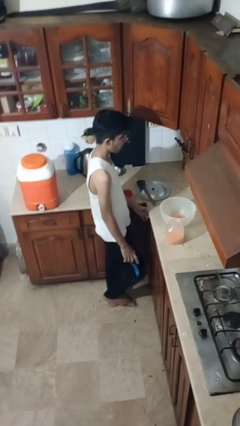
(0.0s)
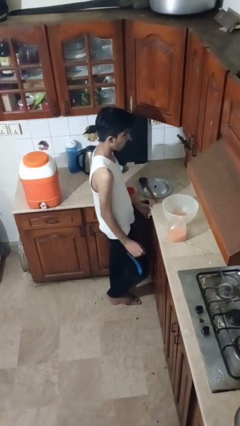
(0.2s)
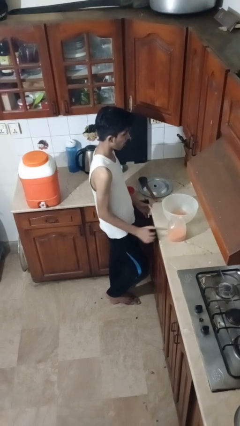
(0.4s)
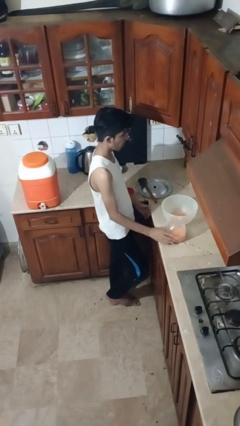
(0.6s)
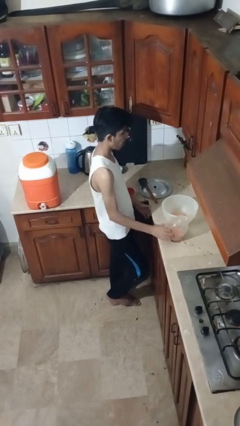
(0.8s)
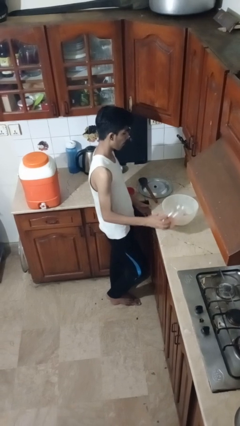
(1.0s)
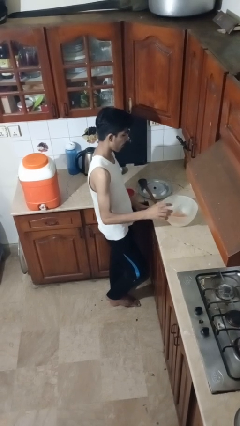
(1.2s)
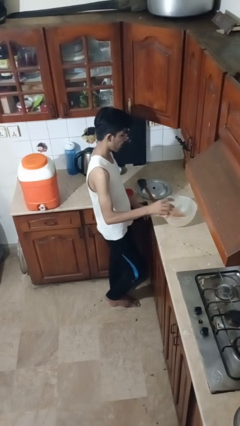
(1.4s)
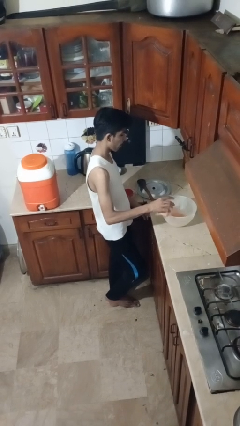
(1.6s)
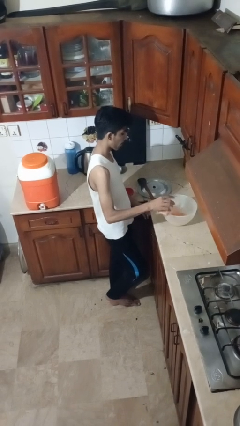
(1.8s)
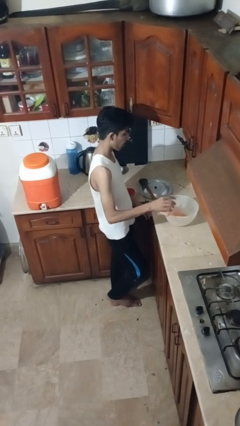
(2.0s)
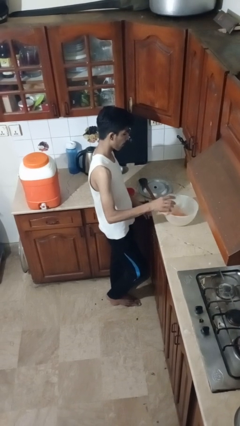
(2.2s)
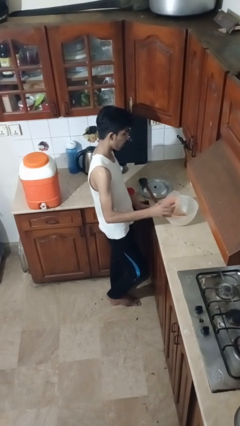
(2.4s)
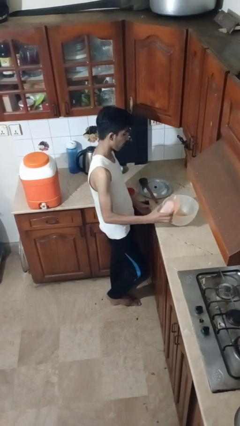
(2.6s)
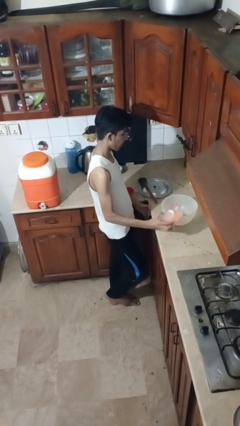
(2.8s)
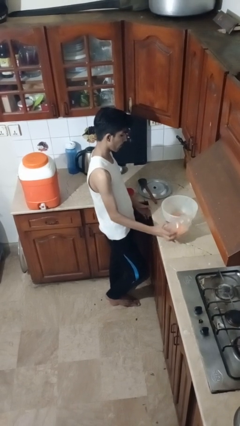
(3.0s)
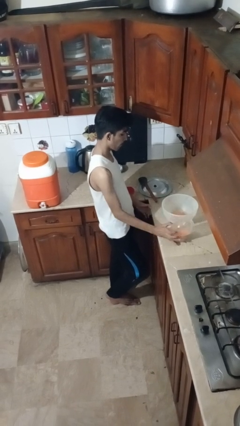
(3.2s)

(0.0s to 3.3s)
person pours into bowl

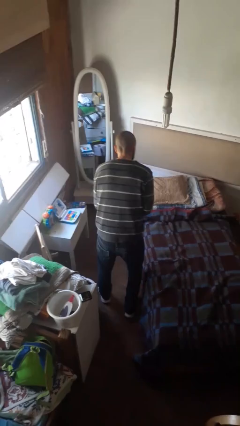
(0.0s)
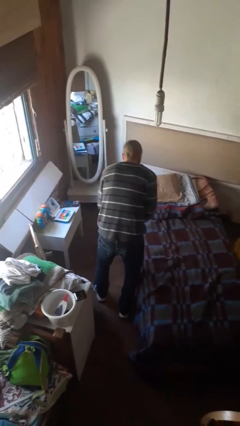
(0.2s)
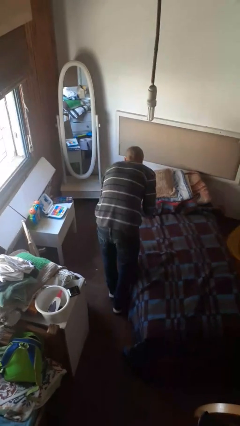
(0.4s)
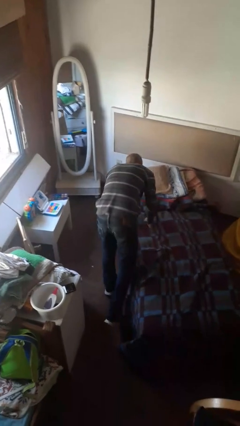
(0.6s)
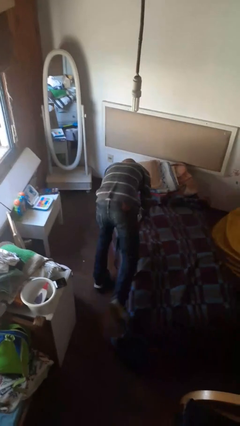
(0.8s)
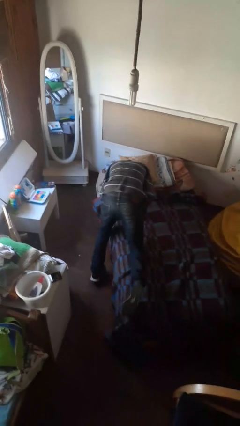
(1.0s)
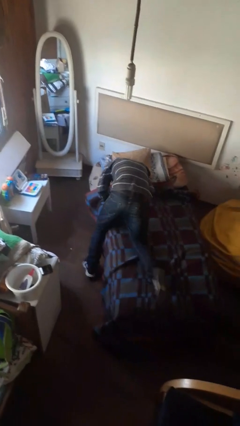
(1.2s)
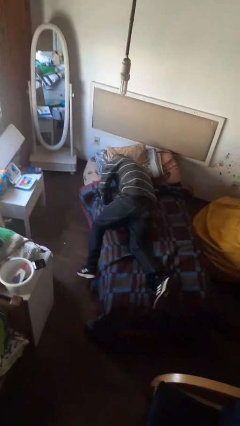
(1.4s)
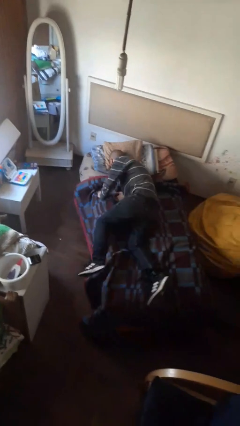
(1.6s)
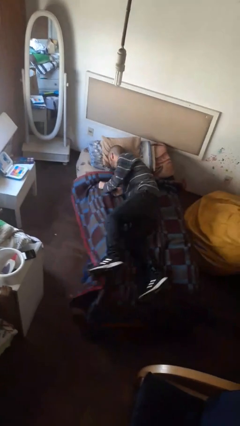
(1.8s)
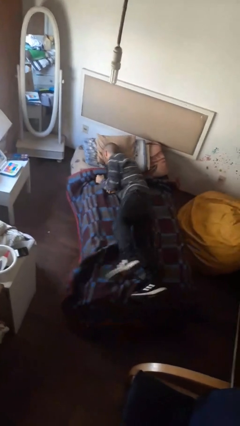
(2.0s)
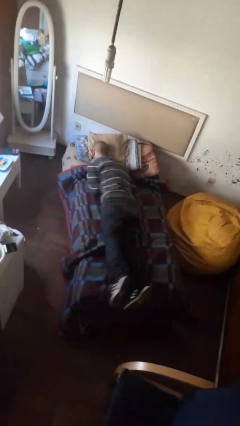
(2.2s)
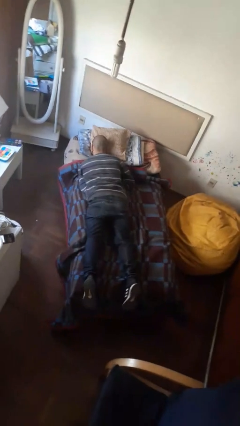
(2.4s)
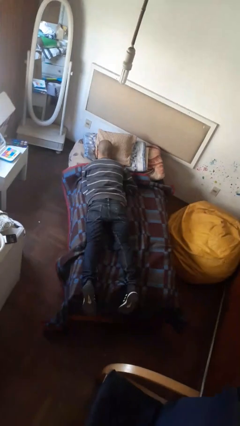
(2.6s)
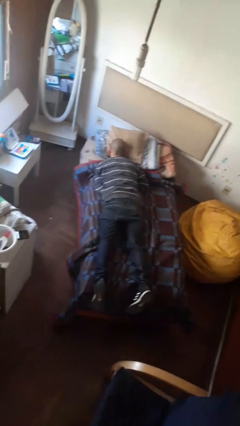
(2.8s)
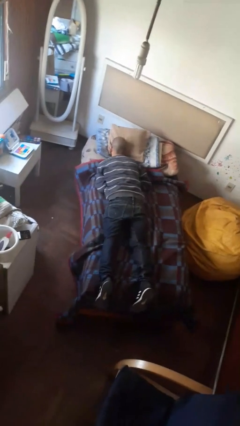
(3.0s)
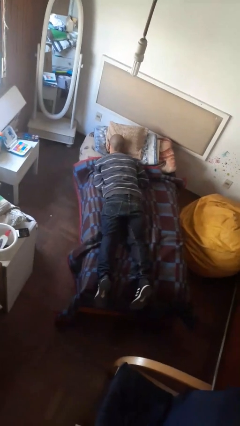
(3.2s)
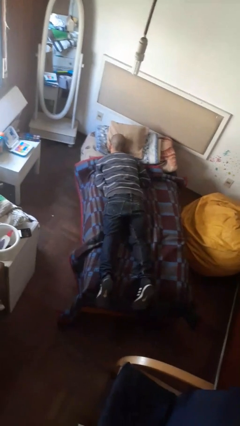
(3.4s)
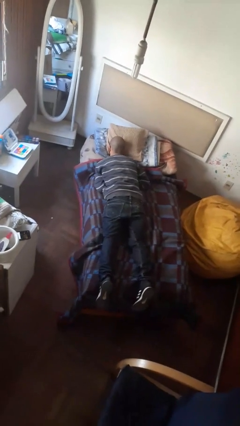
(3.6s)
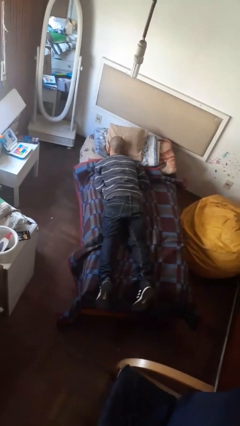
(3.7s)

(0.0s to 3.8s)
person lies down on bed

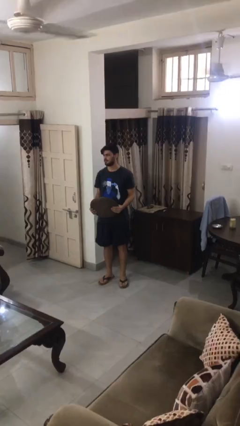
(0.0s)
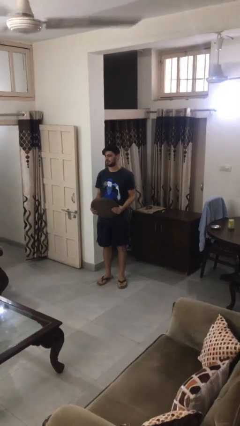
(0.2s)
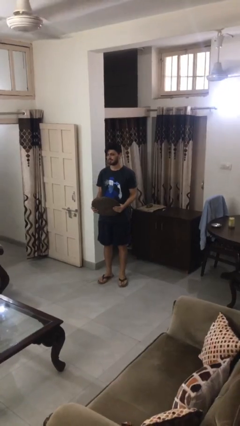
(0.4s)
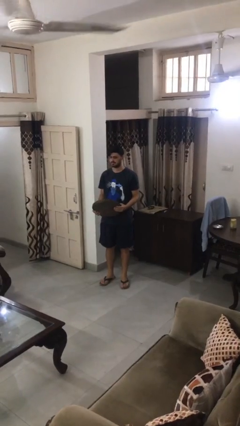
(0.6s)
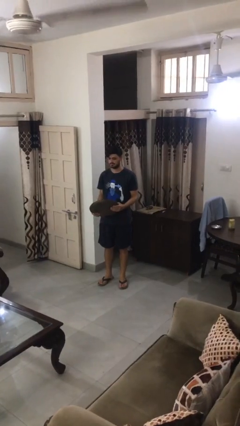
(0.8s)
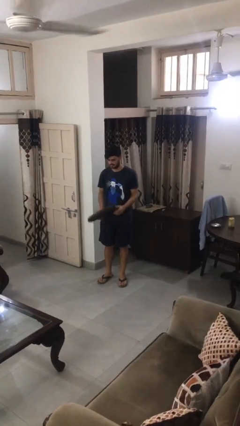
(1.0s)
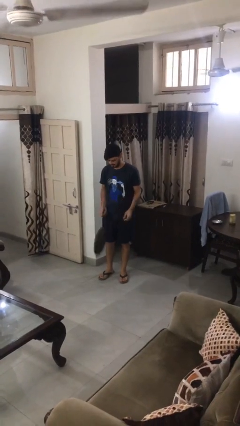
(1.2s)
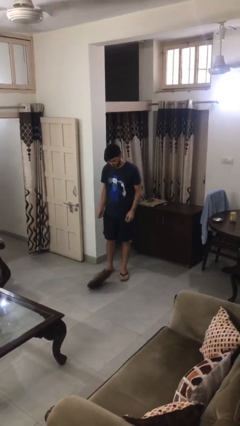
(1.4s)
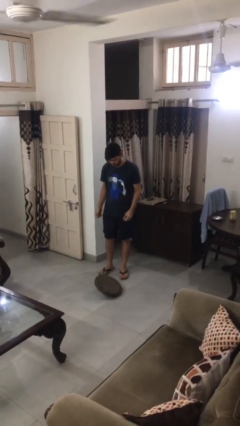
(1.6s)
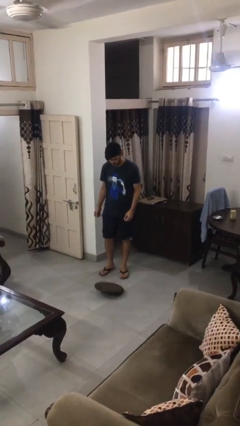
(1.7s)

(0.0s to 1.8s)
person drops object

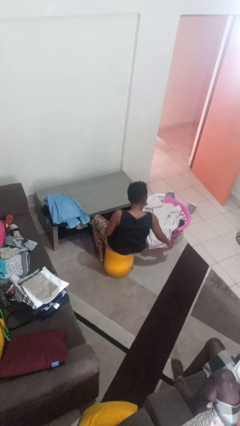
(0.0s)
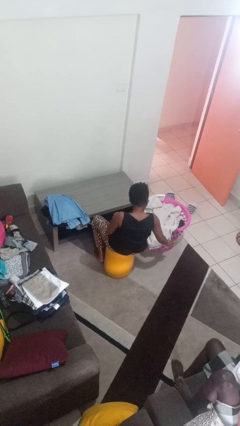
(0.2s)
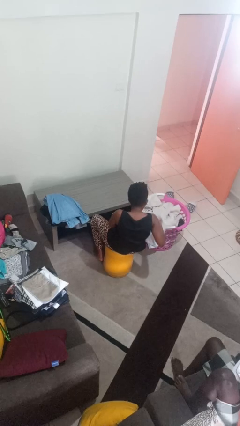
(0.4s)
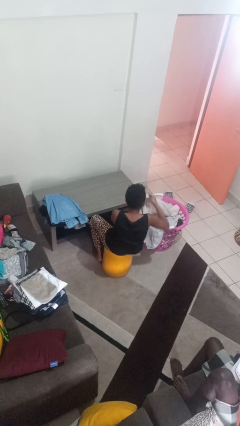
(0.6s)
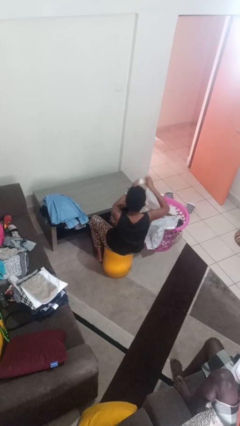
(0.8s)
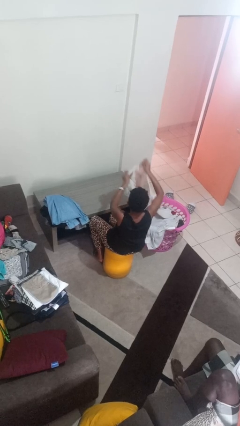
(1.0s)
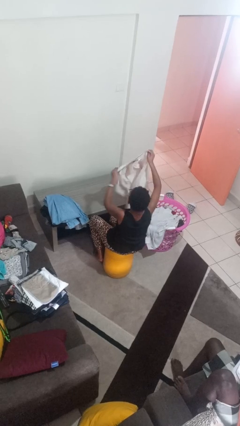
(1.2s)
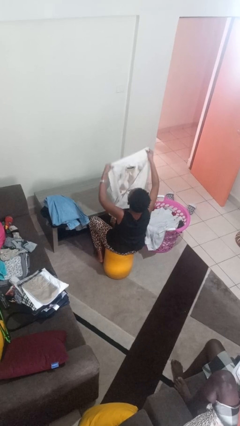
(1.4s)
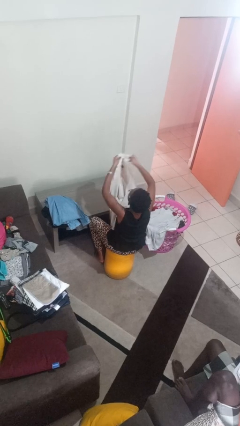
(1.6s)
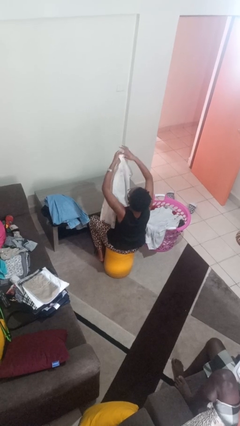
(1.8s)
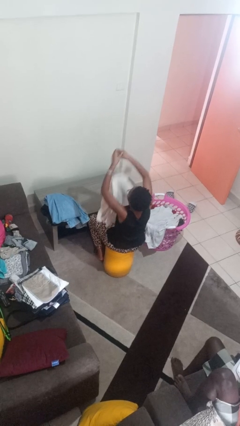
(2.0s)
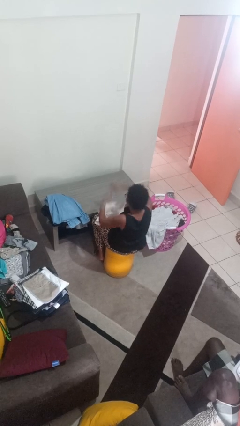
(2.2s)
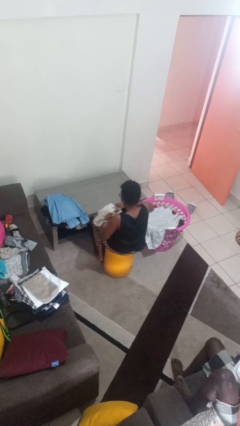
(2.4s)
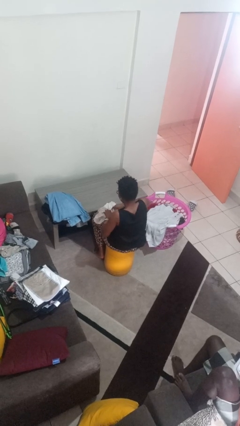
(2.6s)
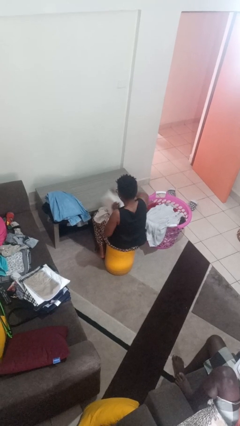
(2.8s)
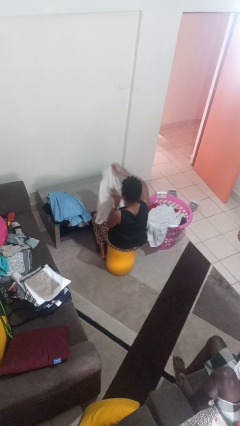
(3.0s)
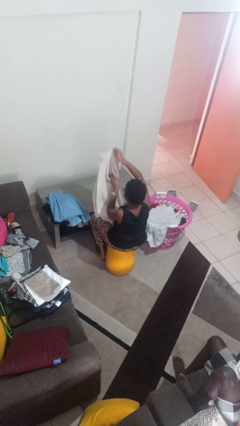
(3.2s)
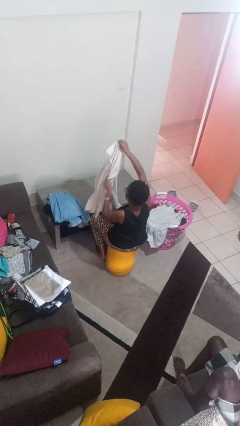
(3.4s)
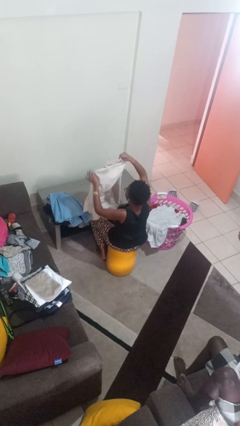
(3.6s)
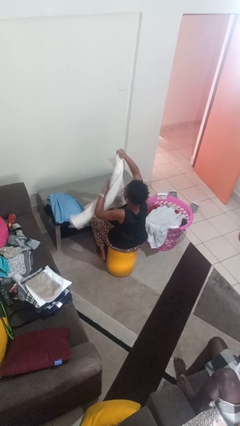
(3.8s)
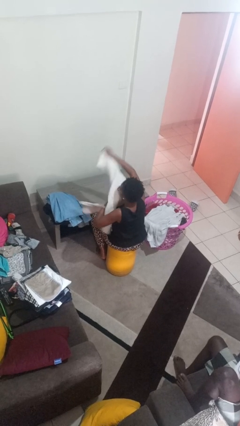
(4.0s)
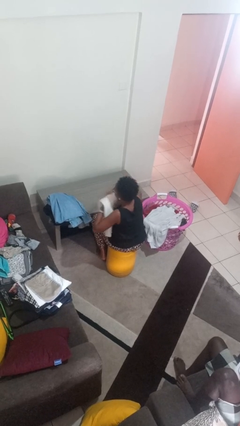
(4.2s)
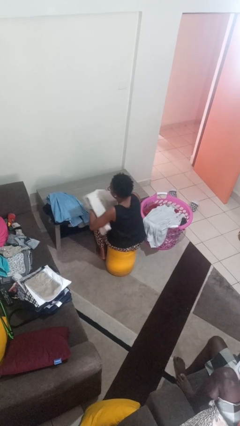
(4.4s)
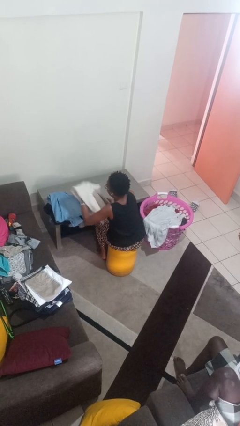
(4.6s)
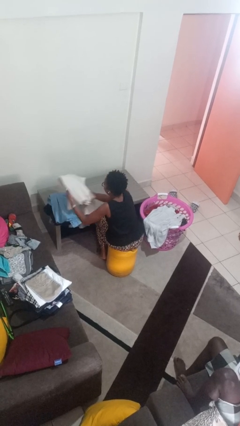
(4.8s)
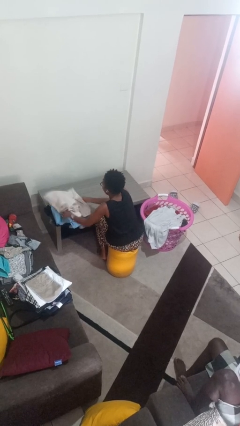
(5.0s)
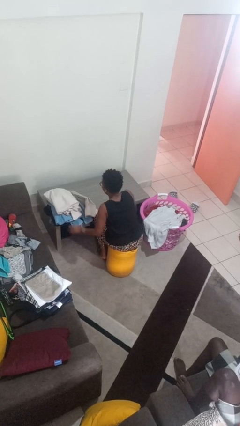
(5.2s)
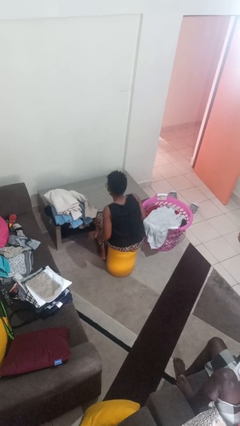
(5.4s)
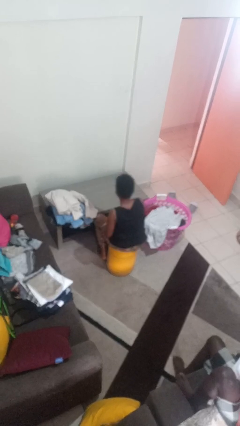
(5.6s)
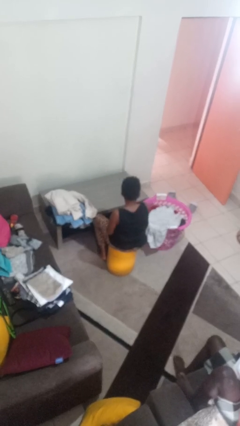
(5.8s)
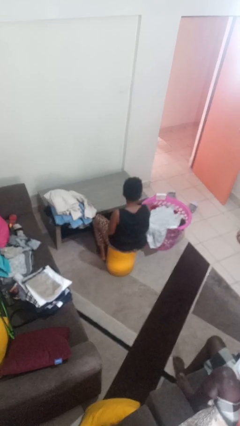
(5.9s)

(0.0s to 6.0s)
person folds shirt

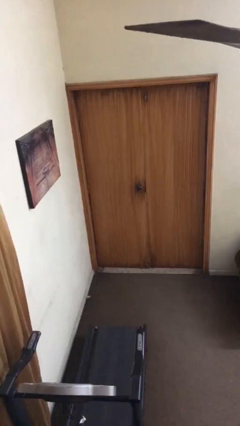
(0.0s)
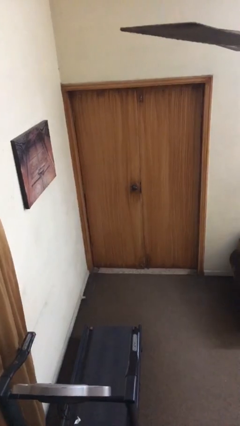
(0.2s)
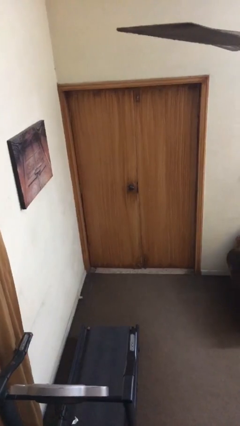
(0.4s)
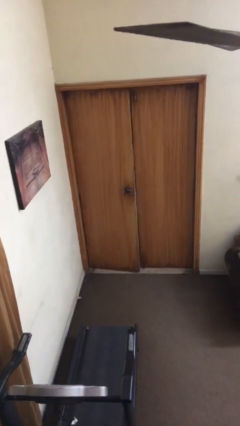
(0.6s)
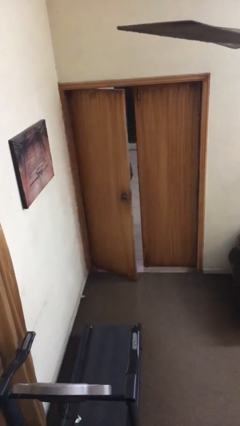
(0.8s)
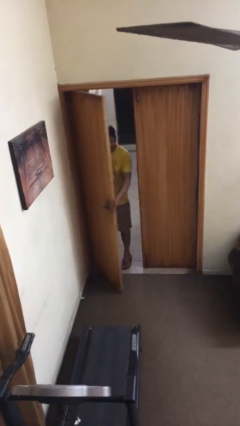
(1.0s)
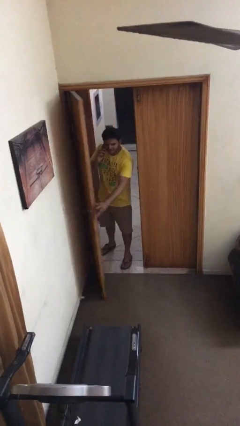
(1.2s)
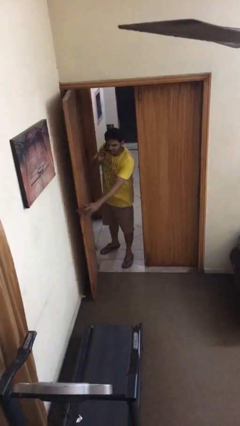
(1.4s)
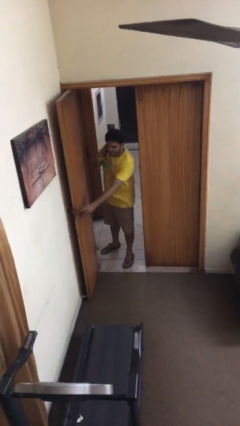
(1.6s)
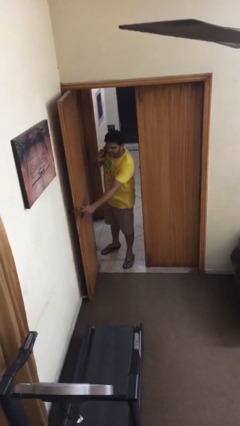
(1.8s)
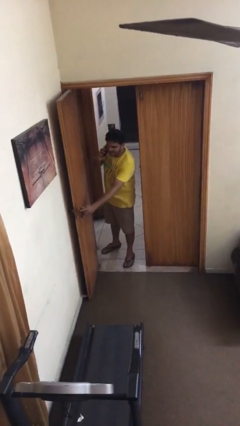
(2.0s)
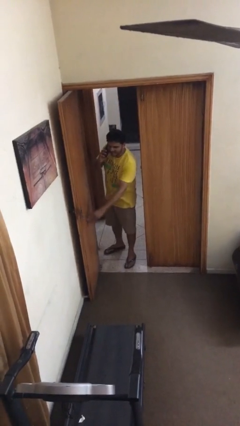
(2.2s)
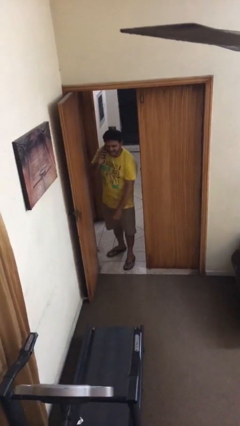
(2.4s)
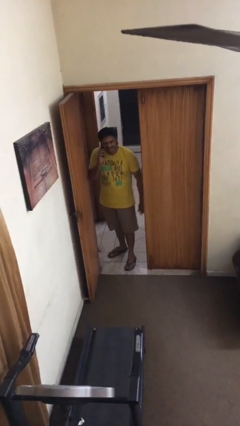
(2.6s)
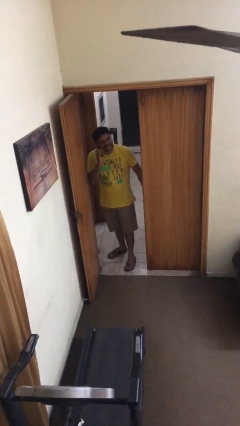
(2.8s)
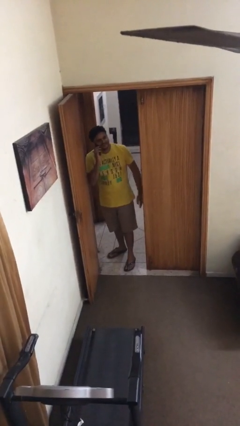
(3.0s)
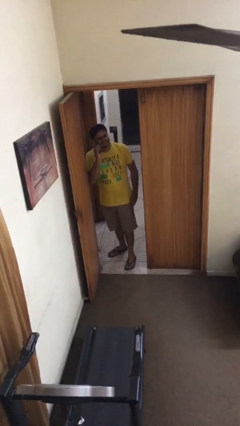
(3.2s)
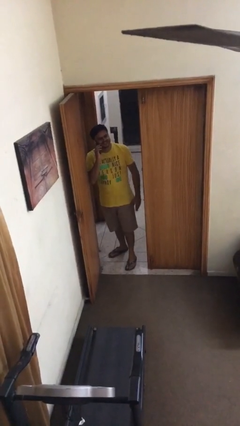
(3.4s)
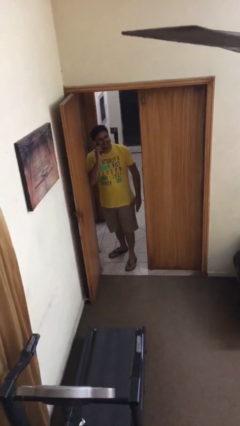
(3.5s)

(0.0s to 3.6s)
person opens facility door
